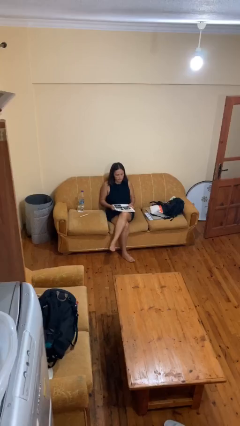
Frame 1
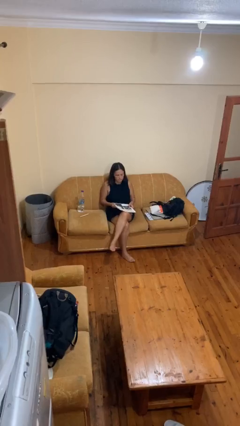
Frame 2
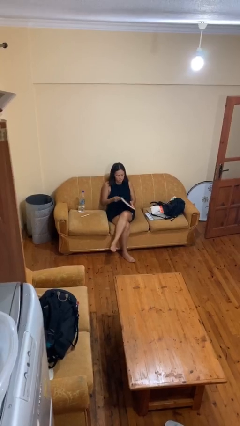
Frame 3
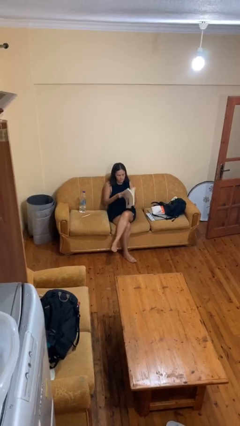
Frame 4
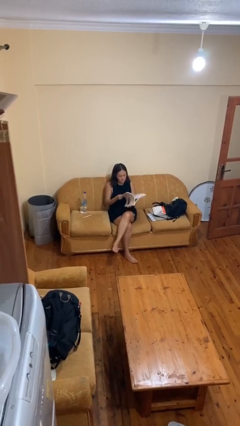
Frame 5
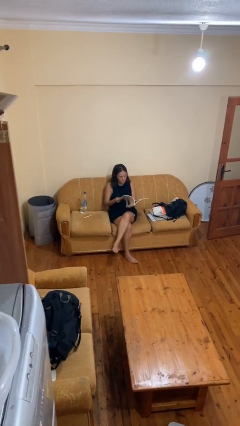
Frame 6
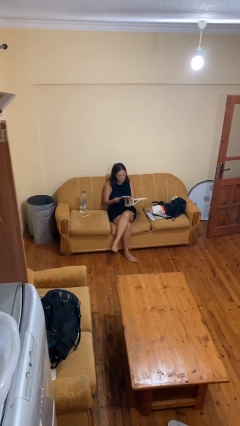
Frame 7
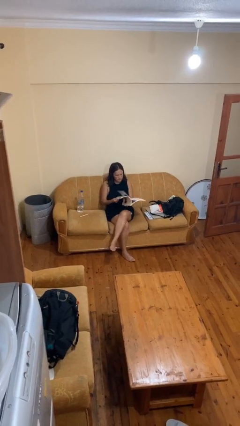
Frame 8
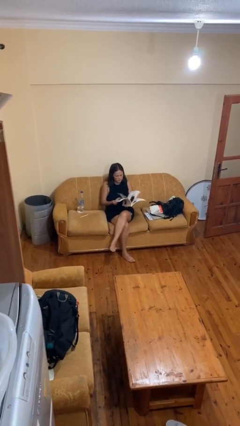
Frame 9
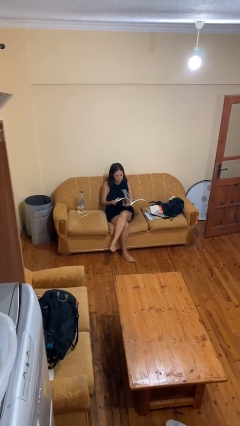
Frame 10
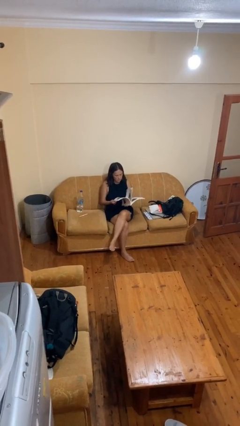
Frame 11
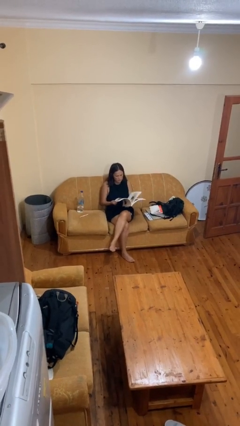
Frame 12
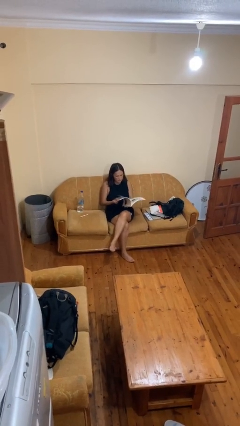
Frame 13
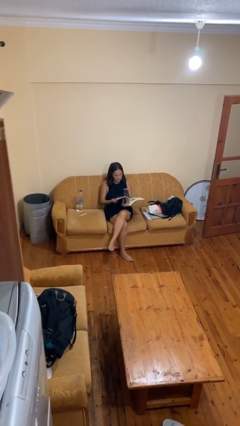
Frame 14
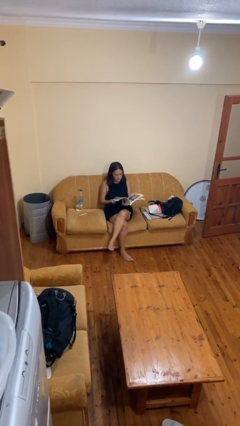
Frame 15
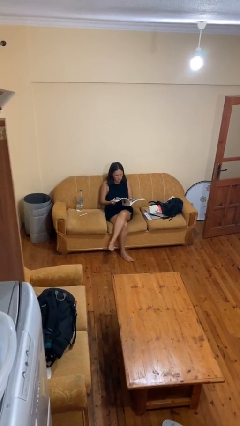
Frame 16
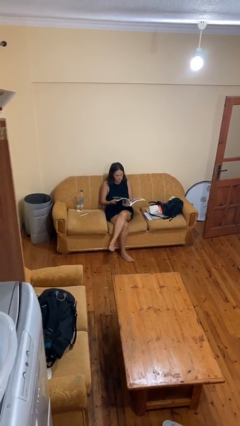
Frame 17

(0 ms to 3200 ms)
person reads magazine

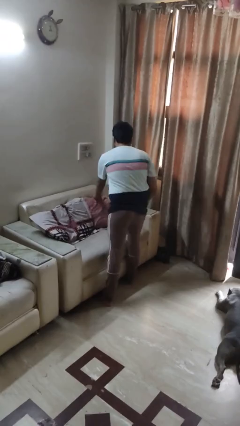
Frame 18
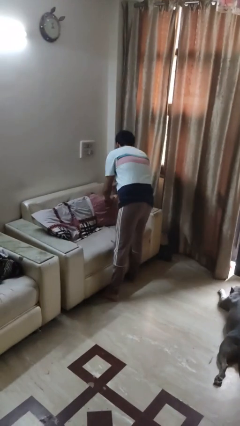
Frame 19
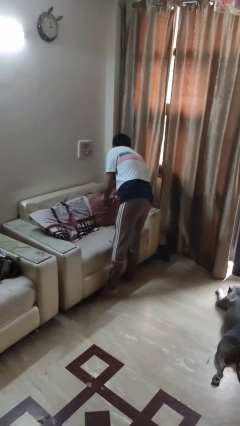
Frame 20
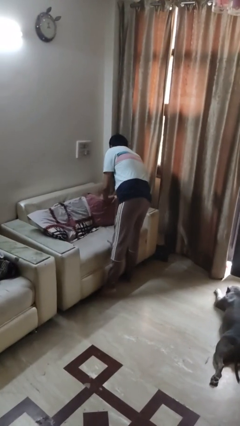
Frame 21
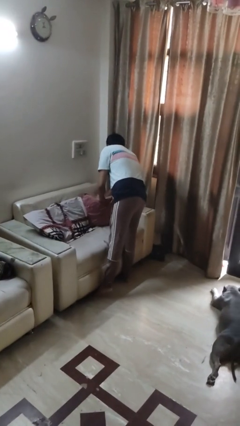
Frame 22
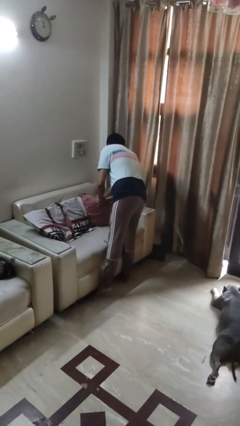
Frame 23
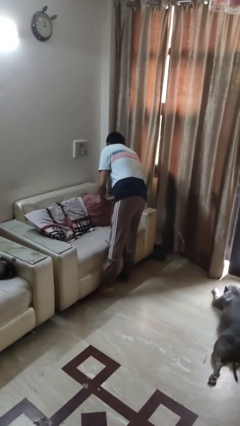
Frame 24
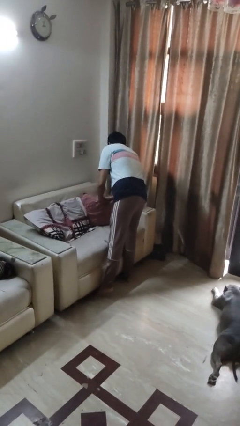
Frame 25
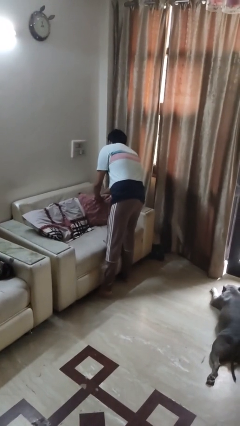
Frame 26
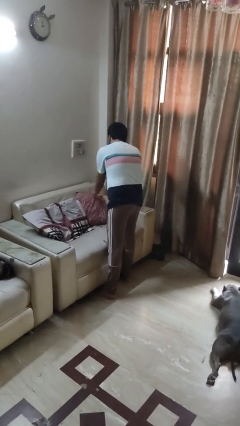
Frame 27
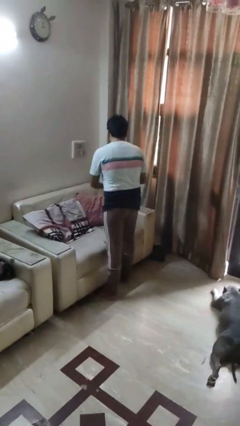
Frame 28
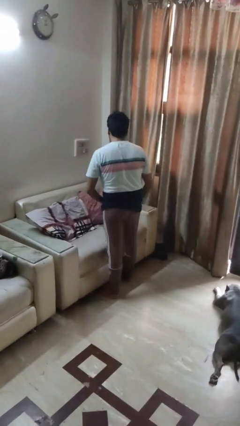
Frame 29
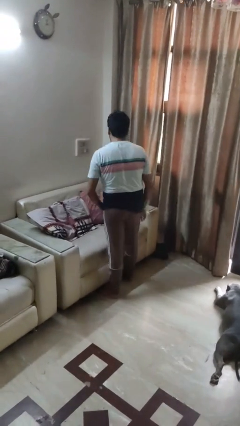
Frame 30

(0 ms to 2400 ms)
person searches in couch

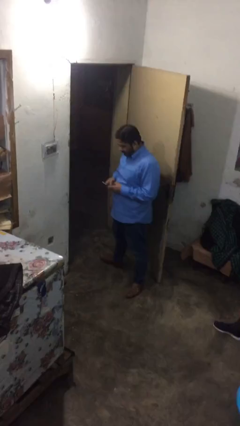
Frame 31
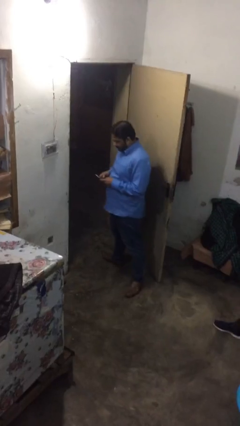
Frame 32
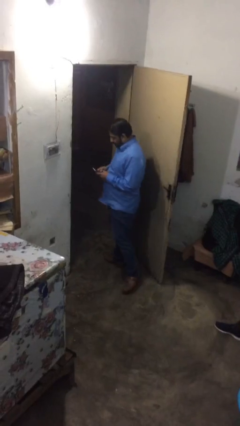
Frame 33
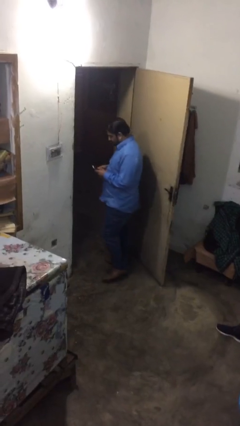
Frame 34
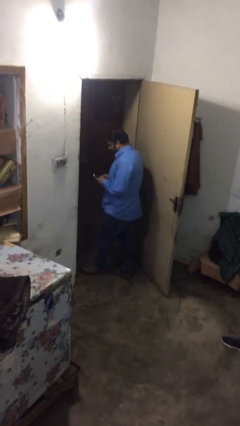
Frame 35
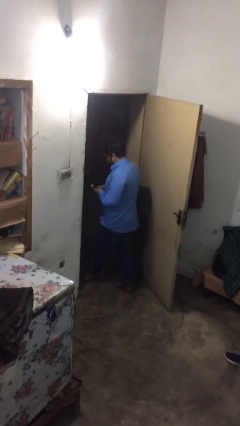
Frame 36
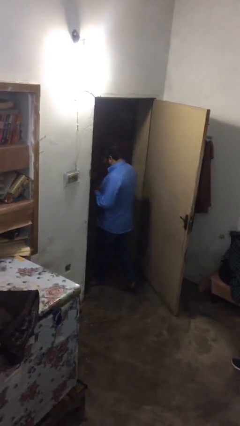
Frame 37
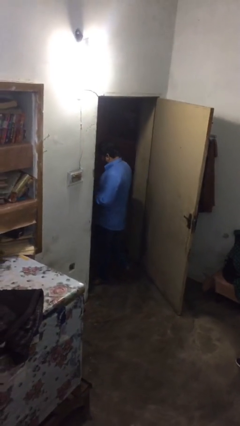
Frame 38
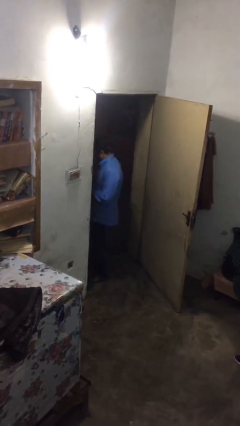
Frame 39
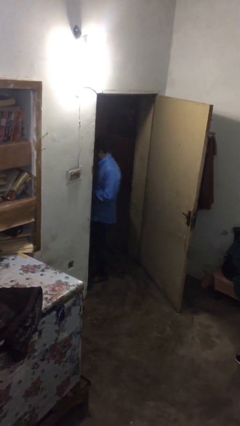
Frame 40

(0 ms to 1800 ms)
person exits scene through structure

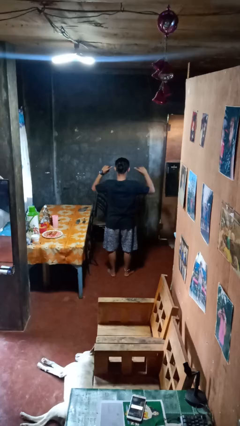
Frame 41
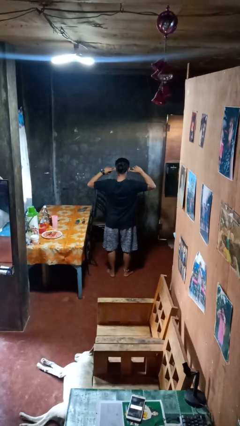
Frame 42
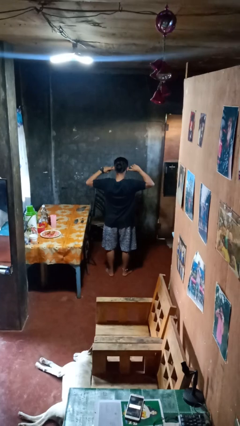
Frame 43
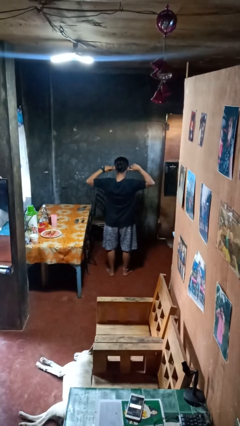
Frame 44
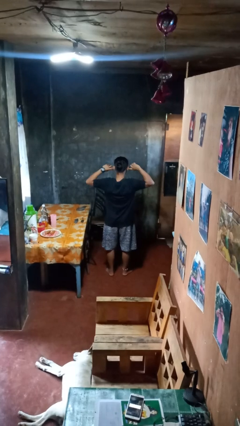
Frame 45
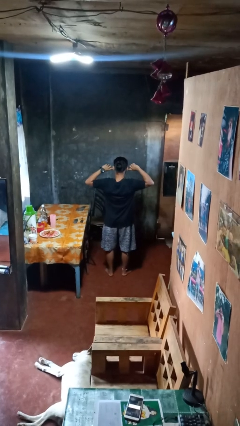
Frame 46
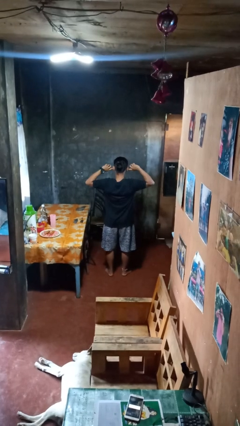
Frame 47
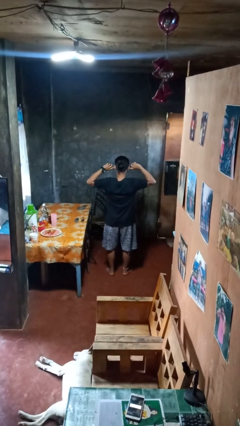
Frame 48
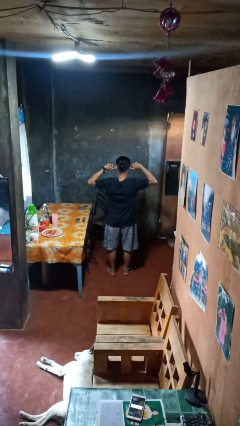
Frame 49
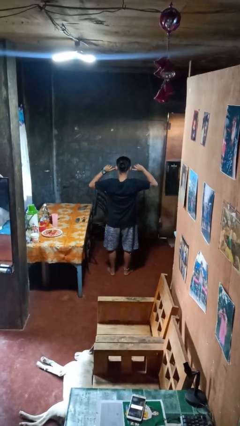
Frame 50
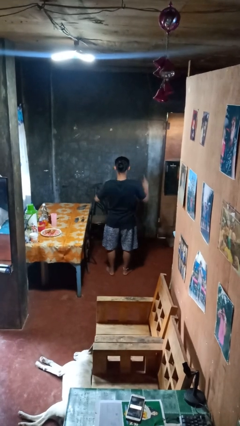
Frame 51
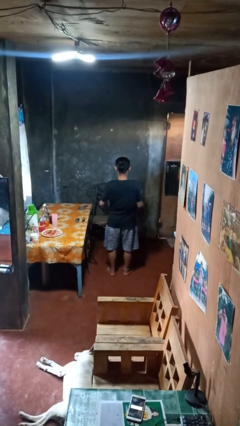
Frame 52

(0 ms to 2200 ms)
person puts fingers in ear

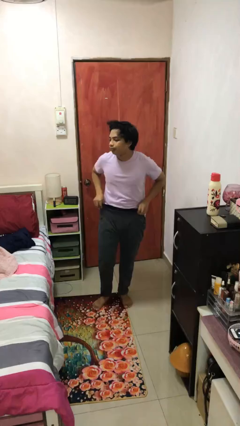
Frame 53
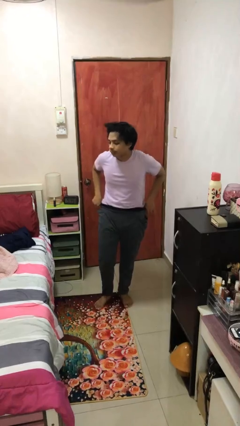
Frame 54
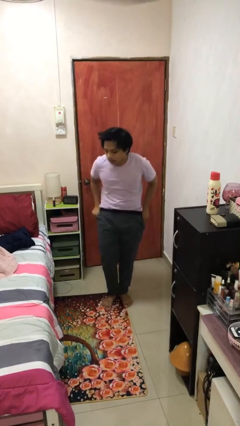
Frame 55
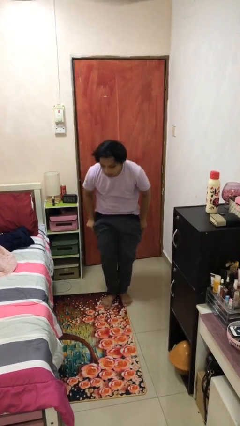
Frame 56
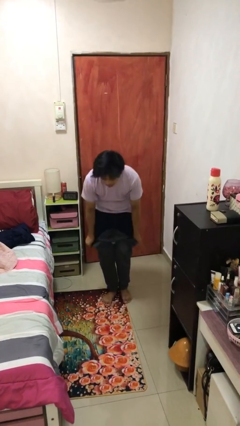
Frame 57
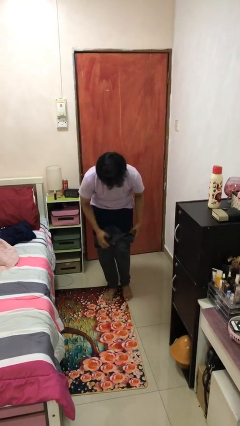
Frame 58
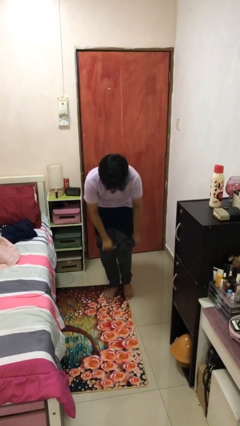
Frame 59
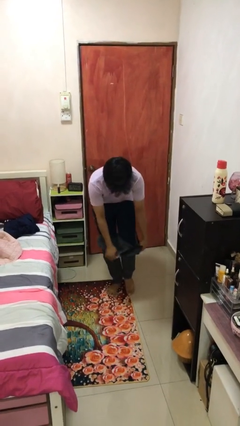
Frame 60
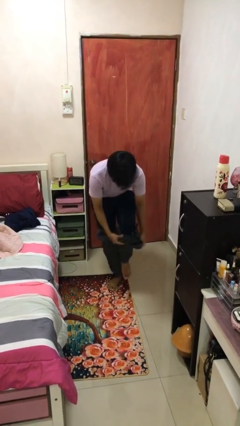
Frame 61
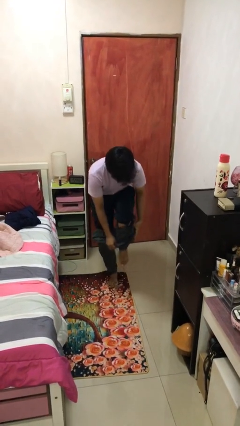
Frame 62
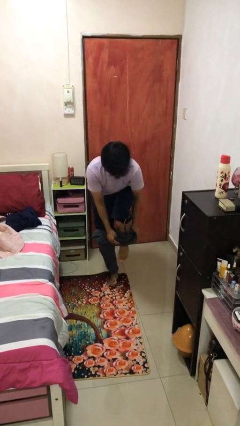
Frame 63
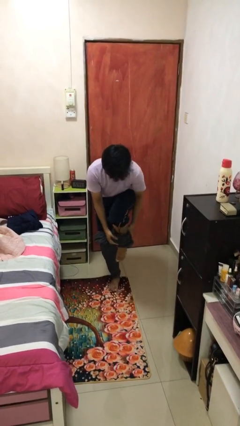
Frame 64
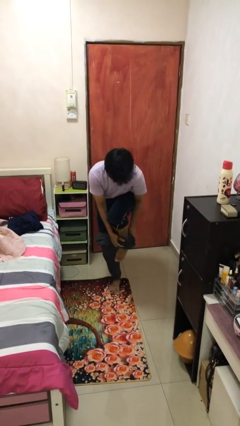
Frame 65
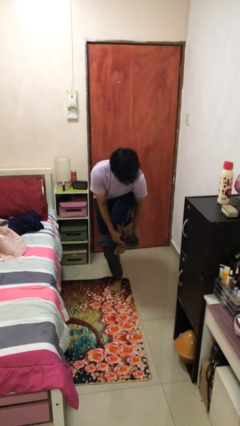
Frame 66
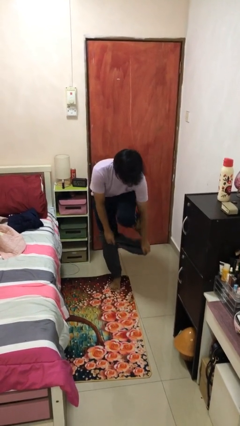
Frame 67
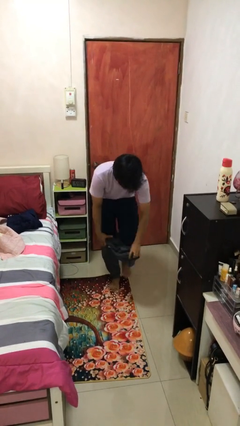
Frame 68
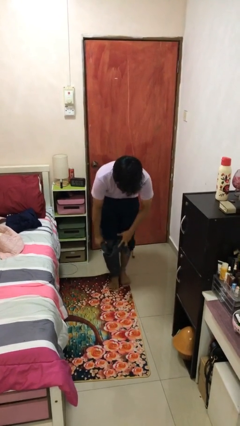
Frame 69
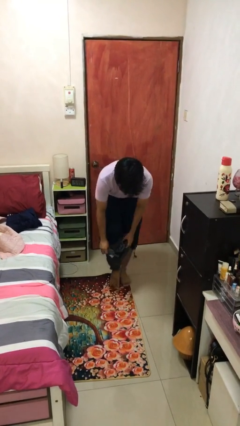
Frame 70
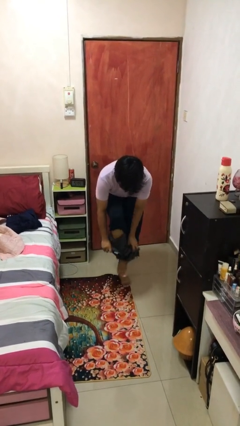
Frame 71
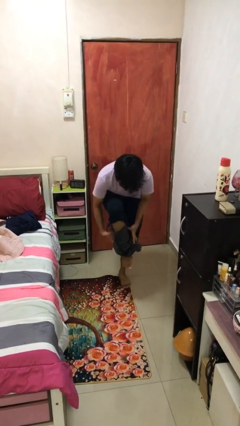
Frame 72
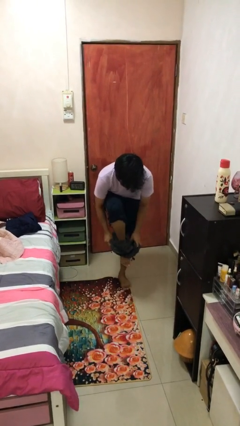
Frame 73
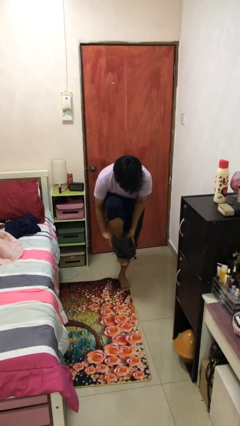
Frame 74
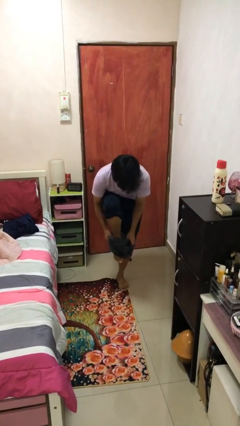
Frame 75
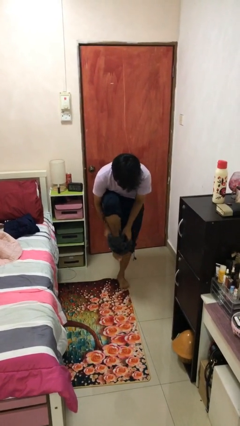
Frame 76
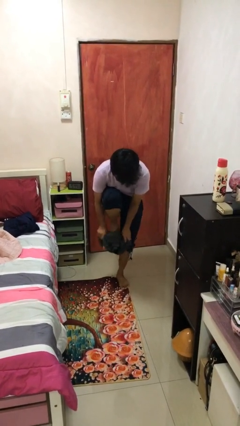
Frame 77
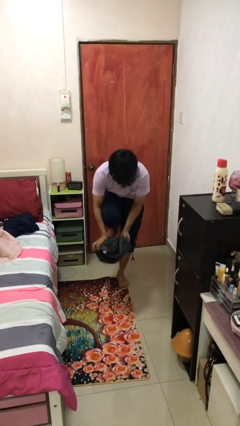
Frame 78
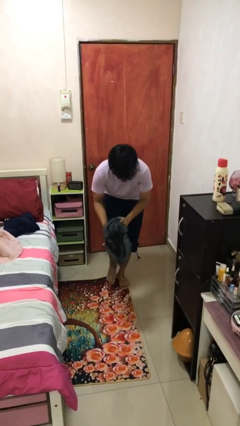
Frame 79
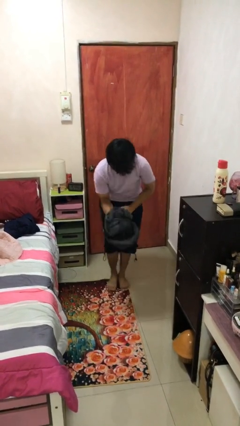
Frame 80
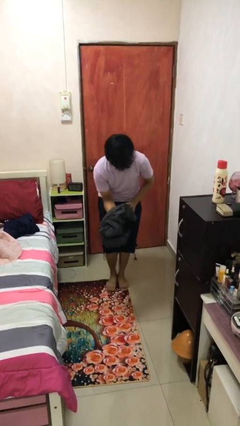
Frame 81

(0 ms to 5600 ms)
person takes off pants

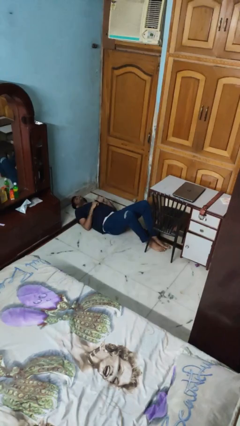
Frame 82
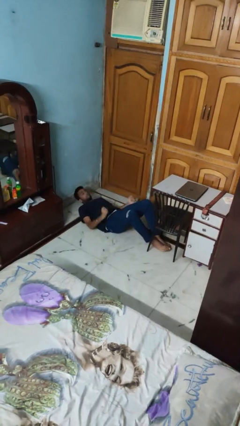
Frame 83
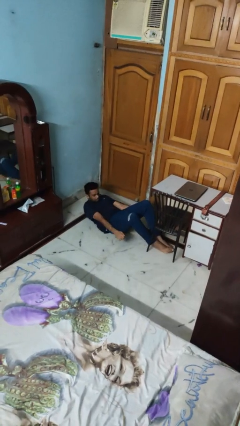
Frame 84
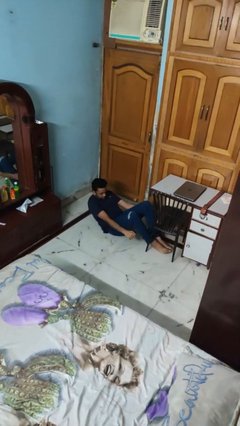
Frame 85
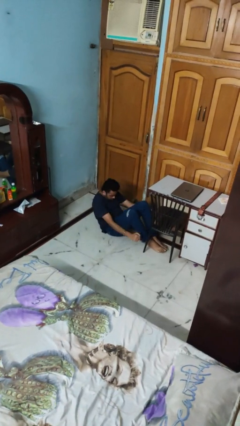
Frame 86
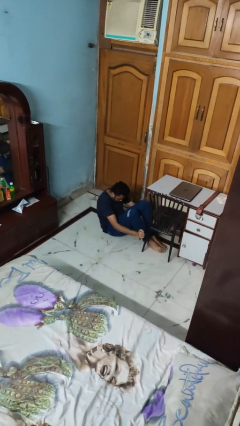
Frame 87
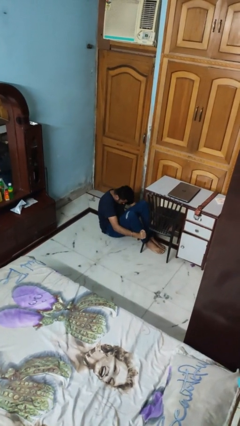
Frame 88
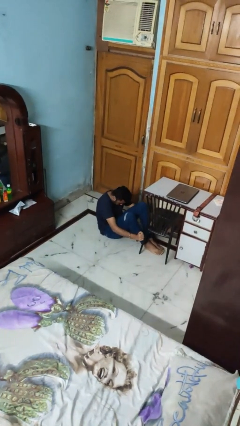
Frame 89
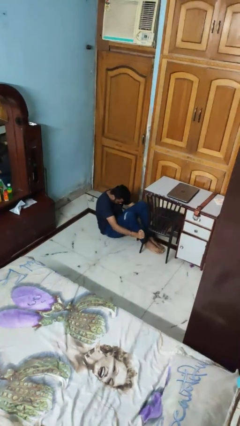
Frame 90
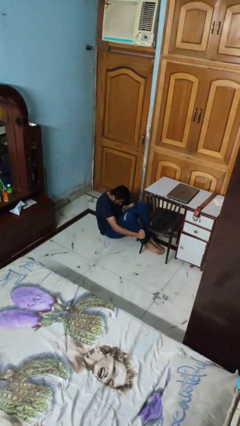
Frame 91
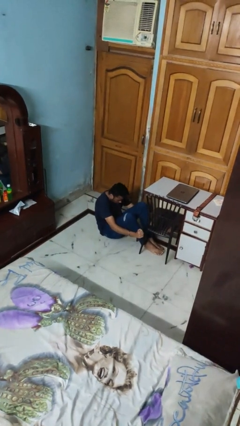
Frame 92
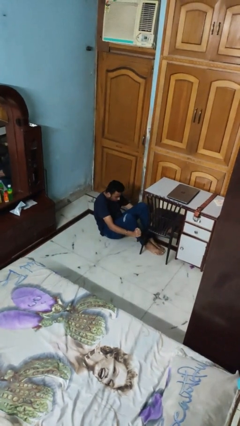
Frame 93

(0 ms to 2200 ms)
person exercises with situp
